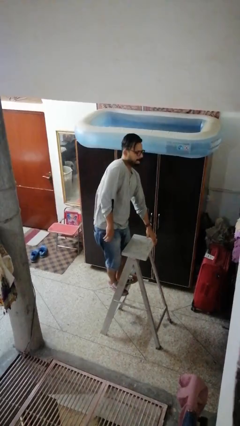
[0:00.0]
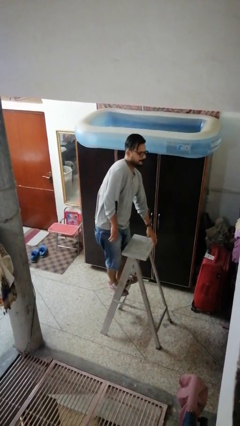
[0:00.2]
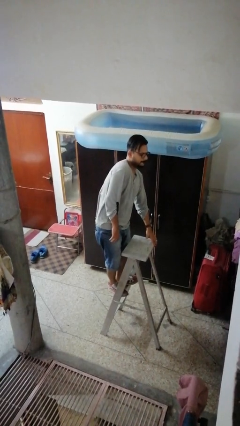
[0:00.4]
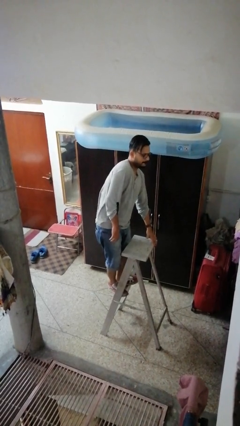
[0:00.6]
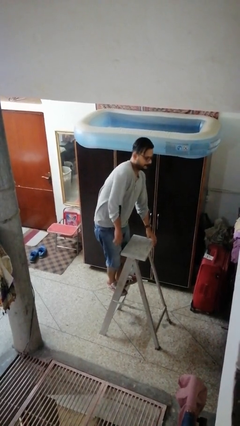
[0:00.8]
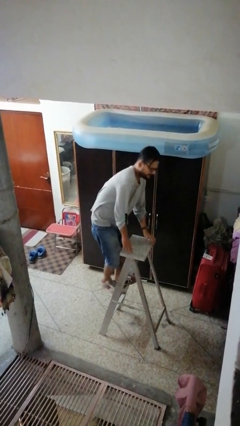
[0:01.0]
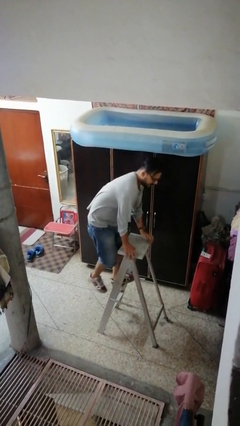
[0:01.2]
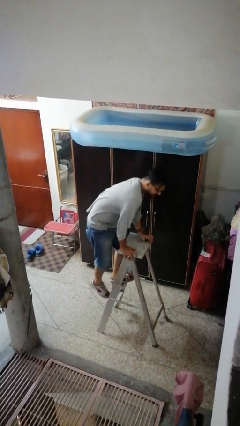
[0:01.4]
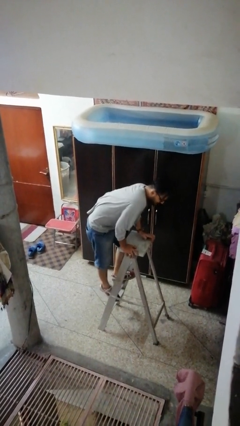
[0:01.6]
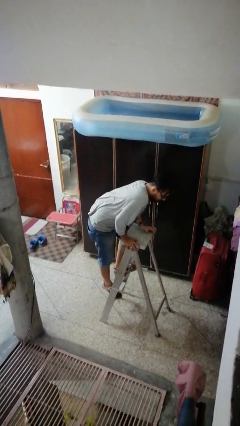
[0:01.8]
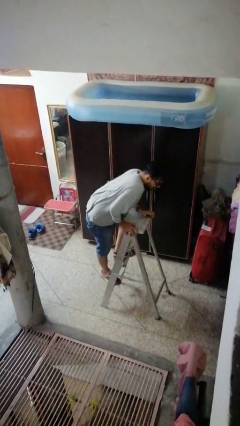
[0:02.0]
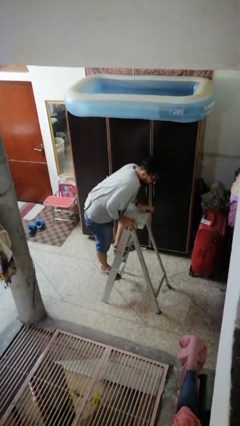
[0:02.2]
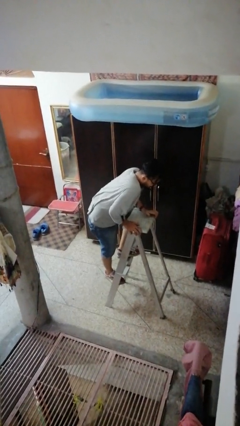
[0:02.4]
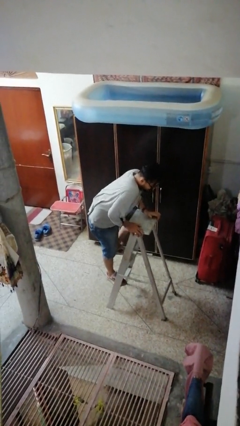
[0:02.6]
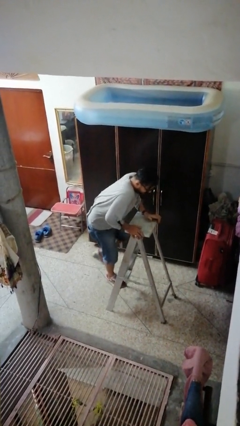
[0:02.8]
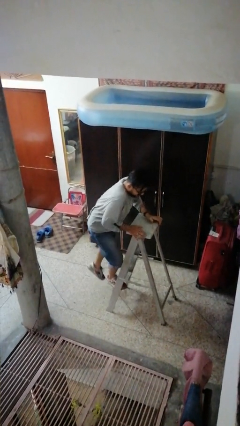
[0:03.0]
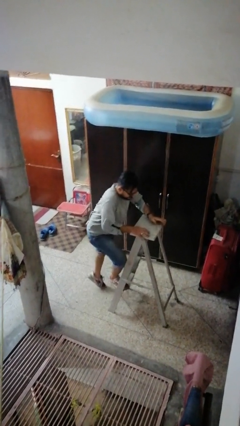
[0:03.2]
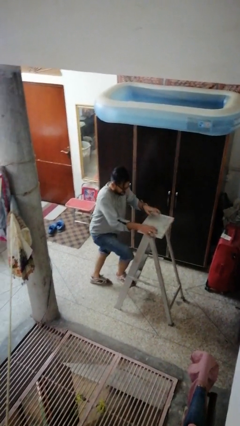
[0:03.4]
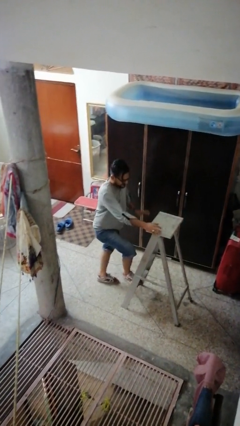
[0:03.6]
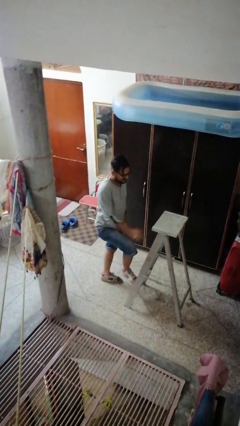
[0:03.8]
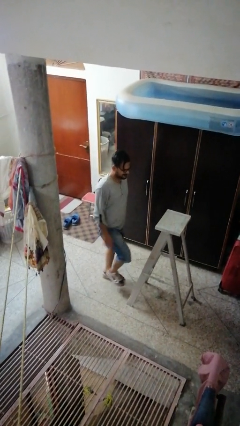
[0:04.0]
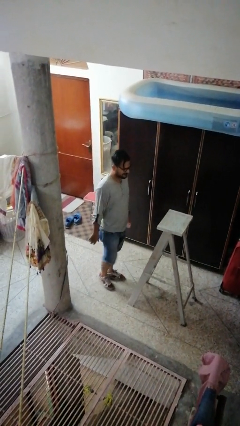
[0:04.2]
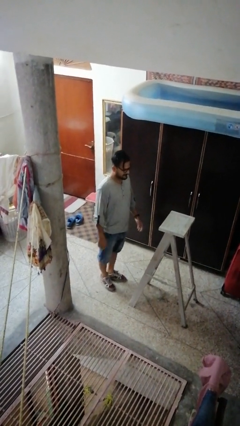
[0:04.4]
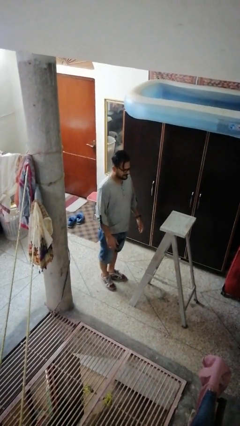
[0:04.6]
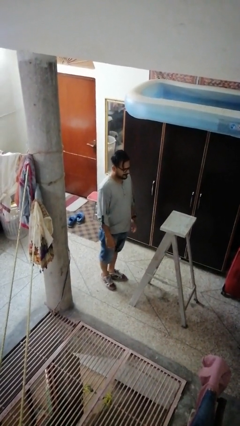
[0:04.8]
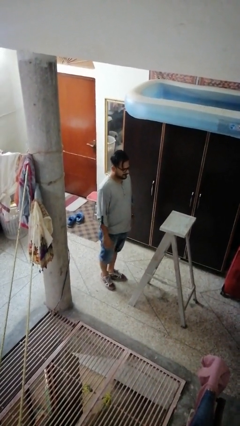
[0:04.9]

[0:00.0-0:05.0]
person climbs down ladder

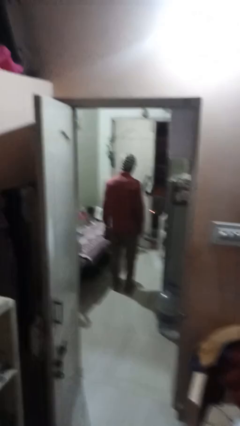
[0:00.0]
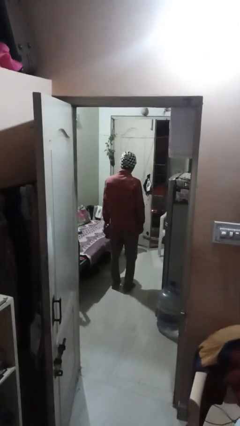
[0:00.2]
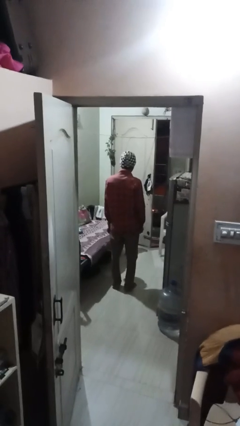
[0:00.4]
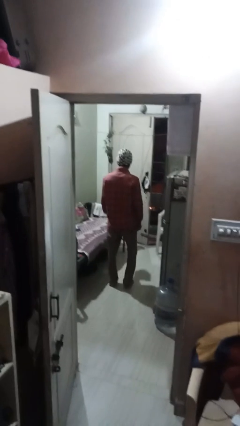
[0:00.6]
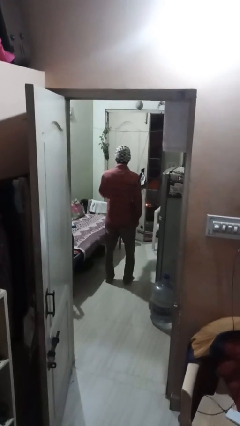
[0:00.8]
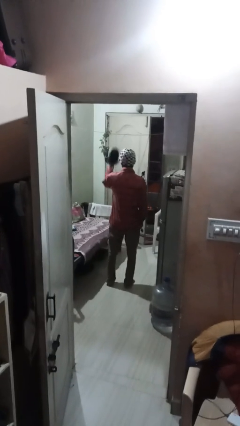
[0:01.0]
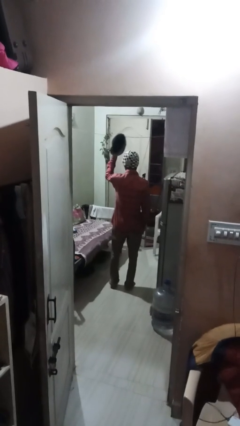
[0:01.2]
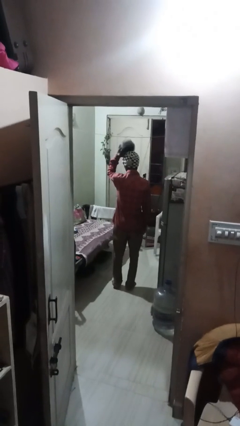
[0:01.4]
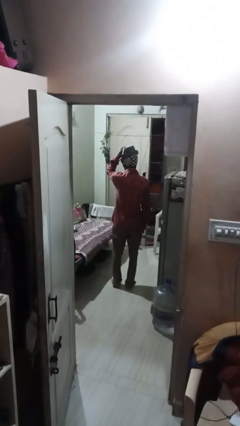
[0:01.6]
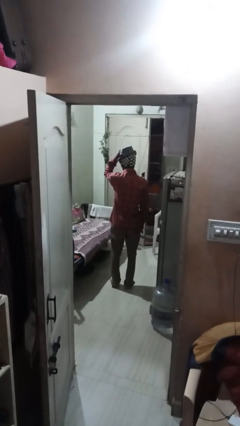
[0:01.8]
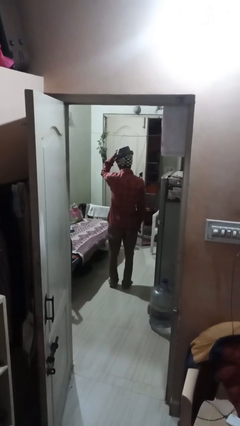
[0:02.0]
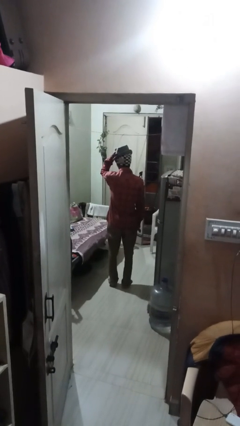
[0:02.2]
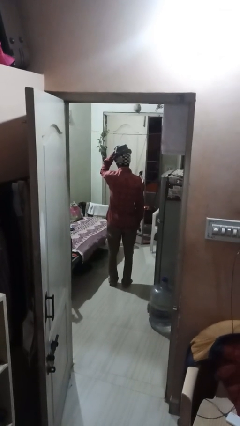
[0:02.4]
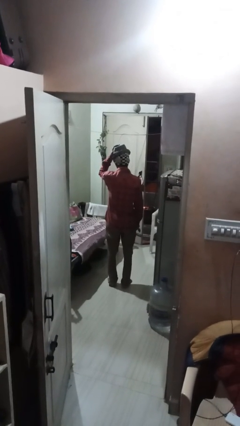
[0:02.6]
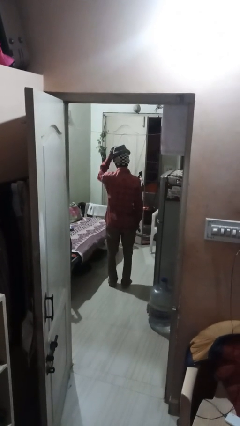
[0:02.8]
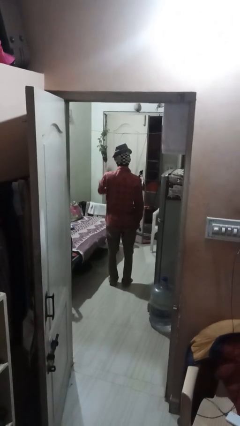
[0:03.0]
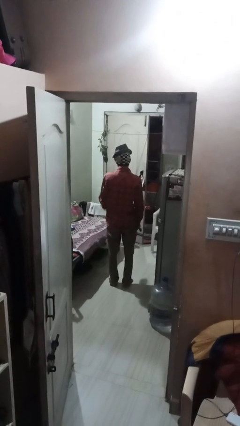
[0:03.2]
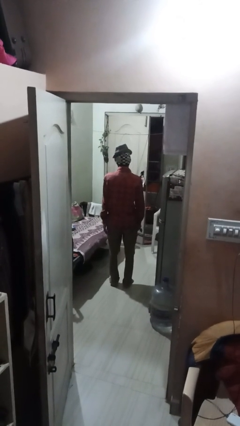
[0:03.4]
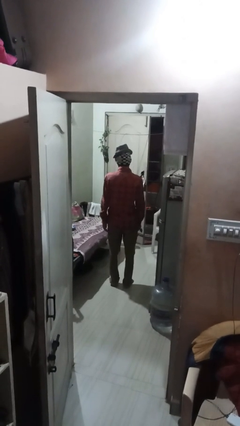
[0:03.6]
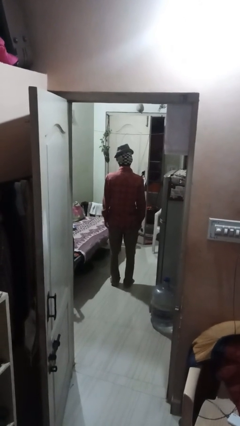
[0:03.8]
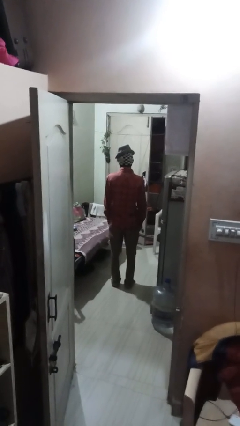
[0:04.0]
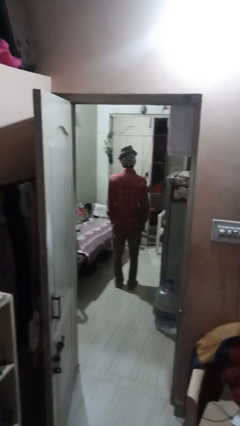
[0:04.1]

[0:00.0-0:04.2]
person puts on hat

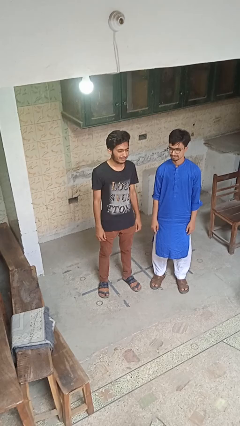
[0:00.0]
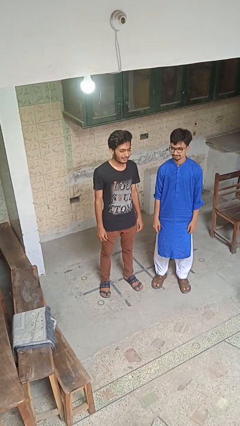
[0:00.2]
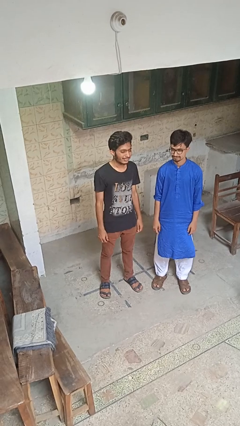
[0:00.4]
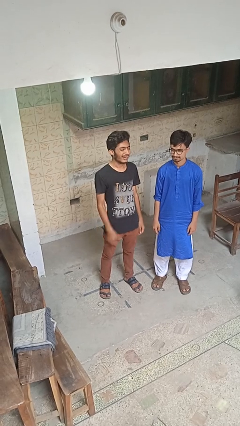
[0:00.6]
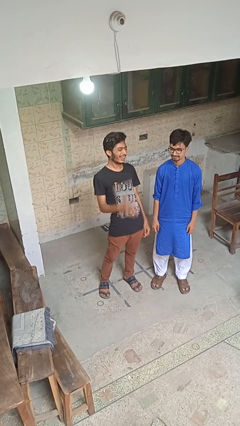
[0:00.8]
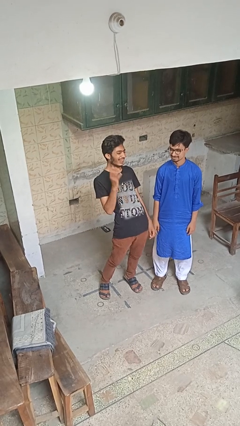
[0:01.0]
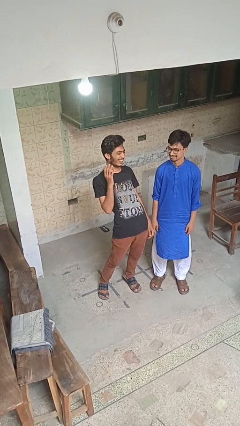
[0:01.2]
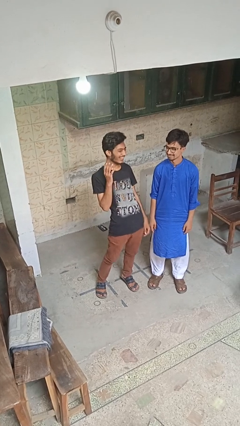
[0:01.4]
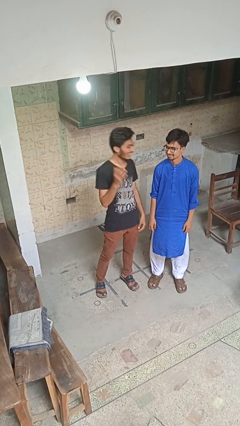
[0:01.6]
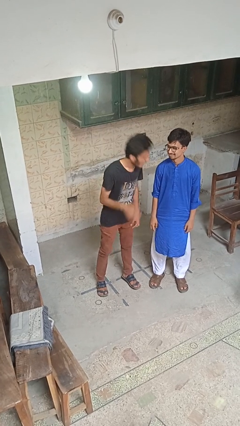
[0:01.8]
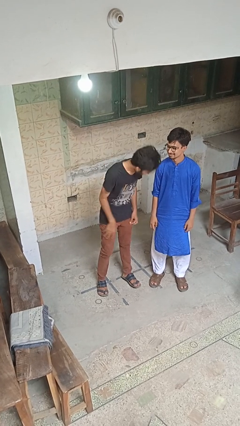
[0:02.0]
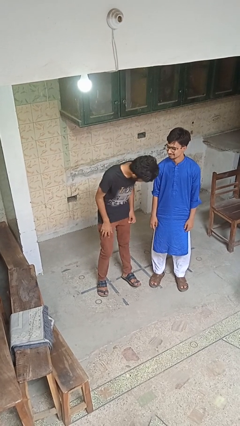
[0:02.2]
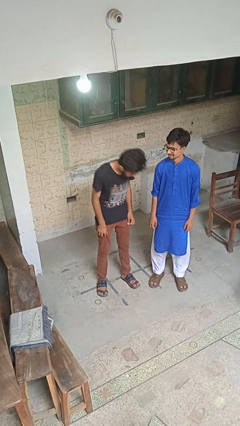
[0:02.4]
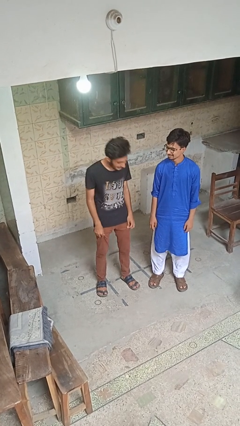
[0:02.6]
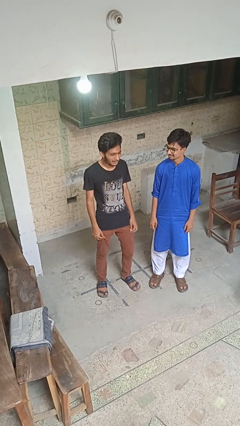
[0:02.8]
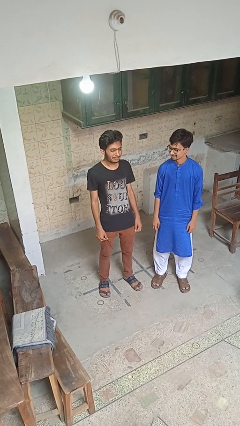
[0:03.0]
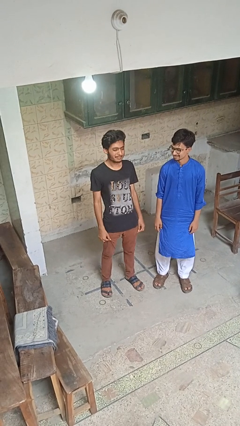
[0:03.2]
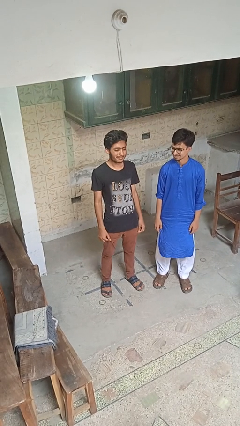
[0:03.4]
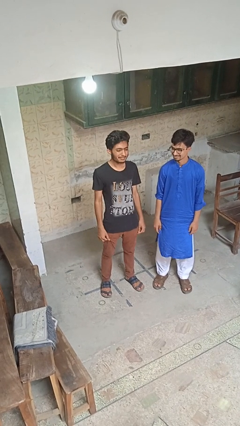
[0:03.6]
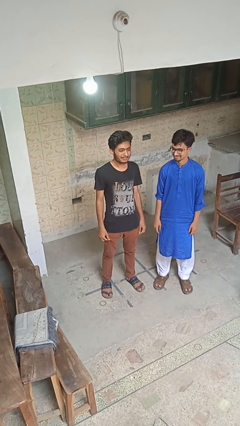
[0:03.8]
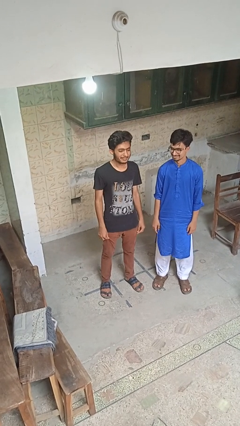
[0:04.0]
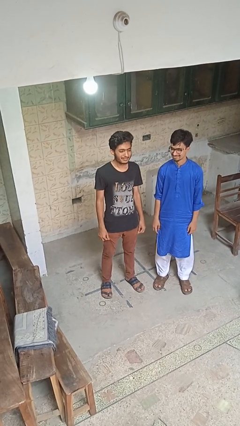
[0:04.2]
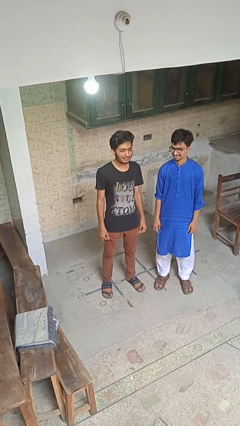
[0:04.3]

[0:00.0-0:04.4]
person laughs with person

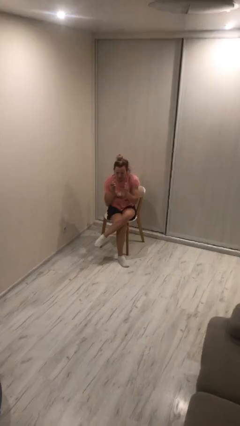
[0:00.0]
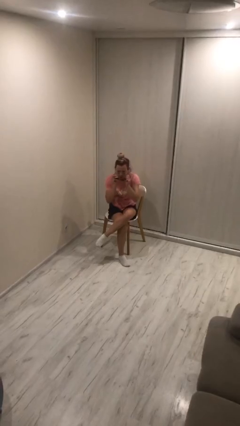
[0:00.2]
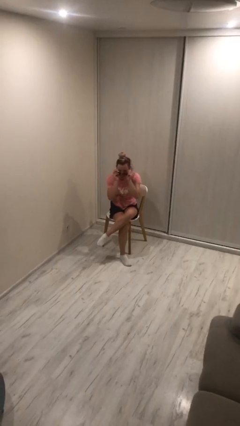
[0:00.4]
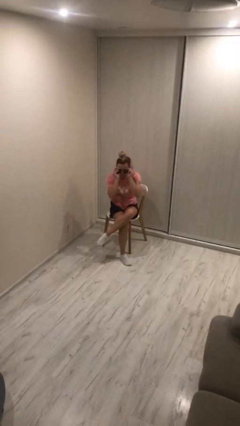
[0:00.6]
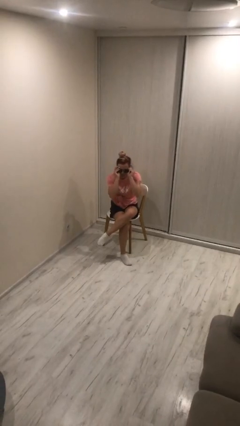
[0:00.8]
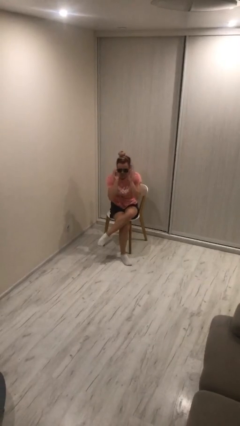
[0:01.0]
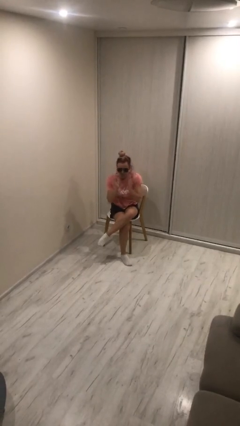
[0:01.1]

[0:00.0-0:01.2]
person puts on sunglasses

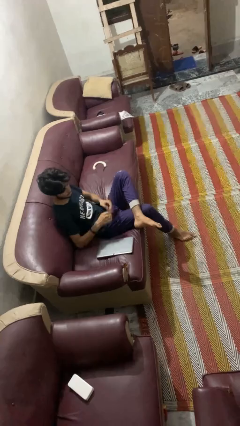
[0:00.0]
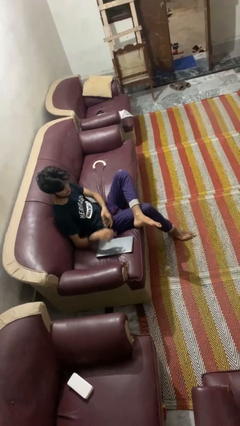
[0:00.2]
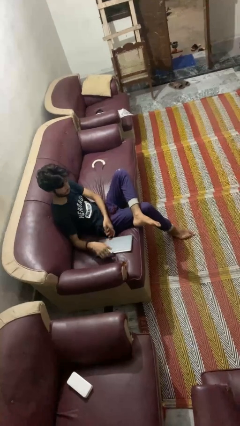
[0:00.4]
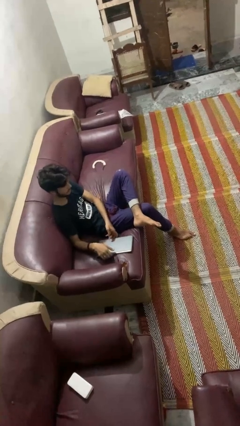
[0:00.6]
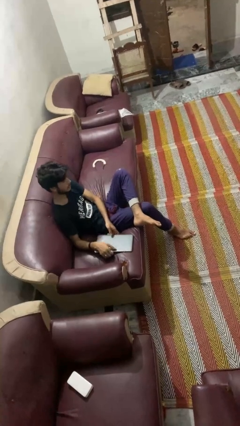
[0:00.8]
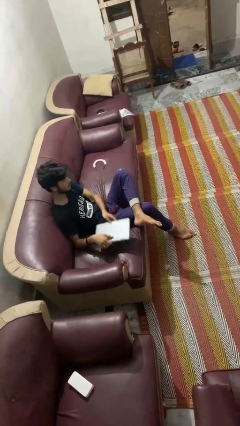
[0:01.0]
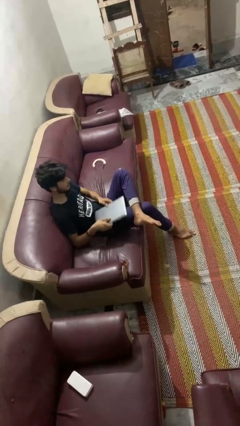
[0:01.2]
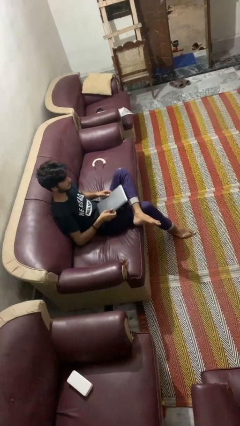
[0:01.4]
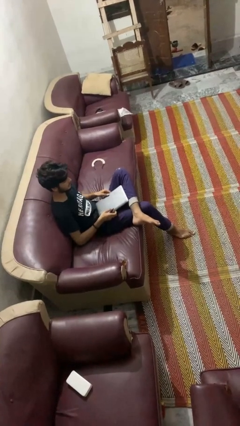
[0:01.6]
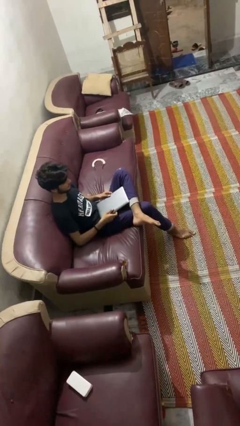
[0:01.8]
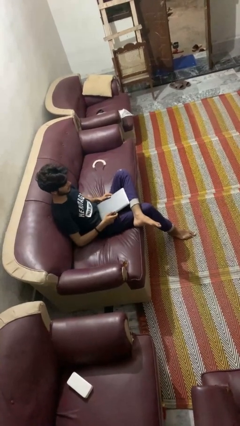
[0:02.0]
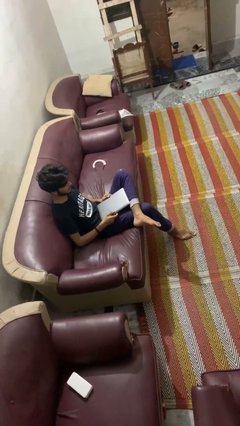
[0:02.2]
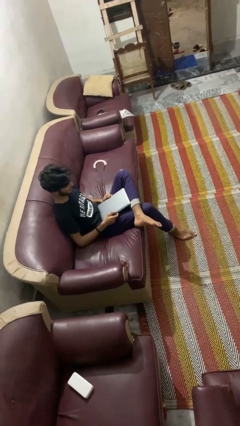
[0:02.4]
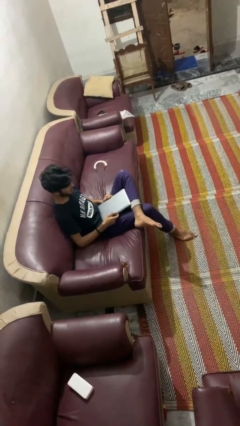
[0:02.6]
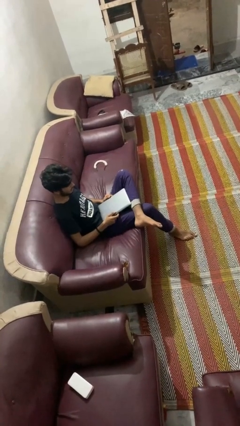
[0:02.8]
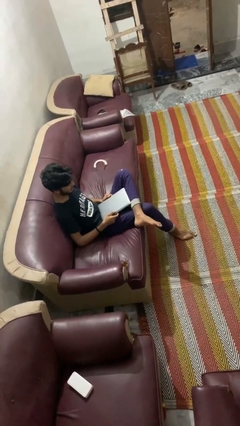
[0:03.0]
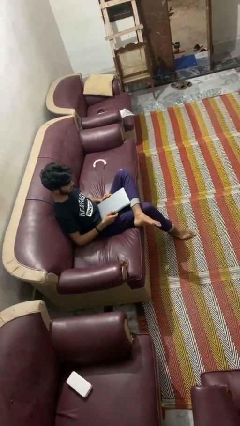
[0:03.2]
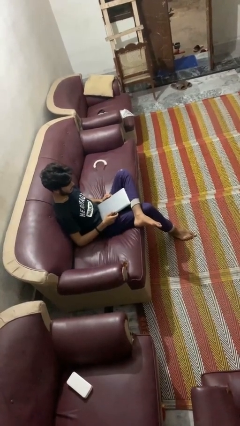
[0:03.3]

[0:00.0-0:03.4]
person picks up object from couch
